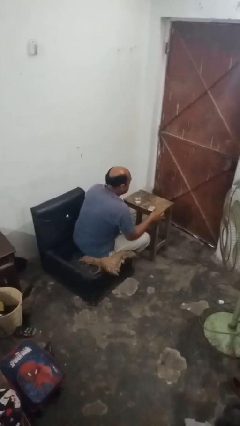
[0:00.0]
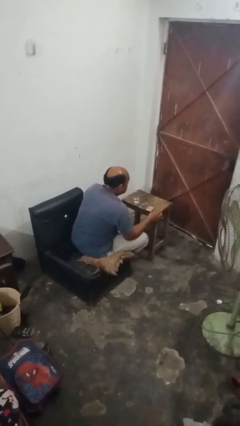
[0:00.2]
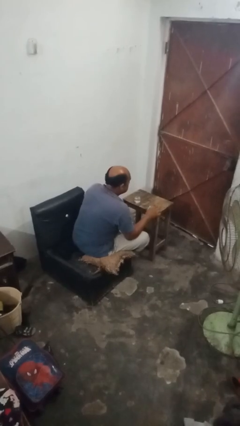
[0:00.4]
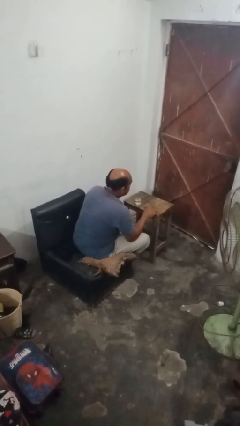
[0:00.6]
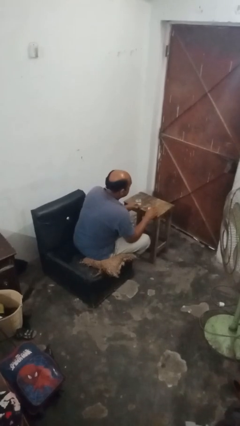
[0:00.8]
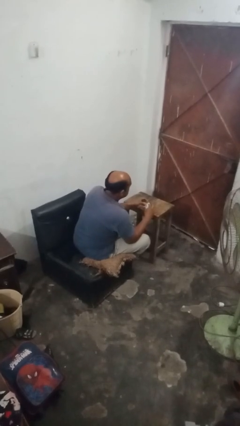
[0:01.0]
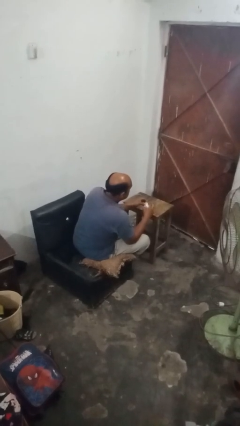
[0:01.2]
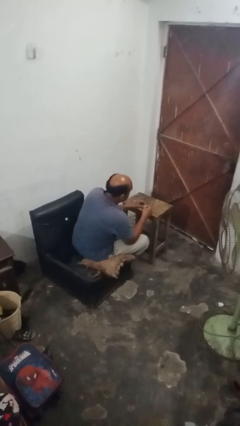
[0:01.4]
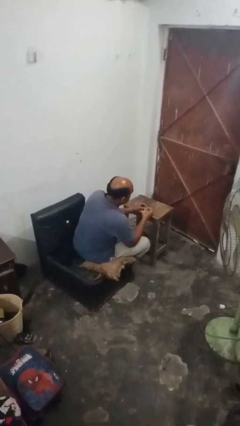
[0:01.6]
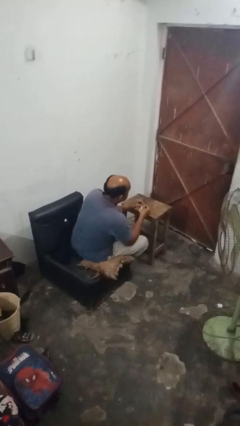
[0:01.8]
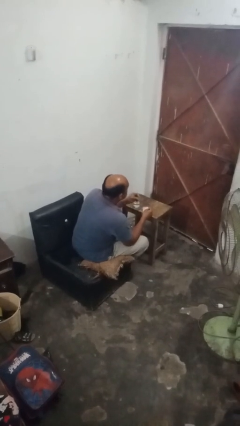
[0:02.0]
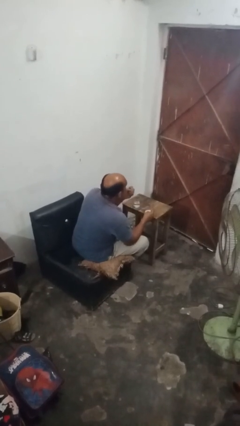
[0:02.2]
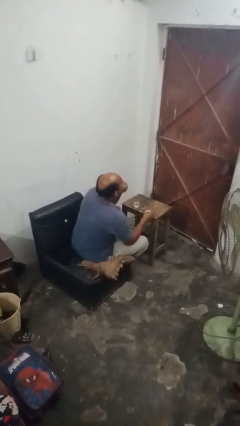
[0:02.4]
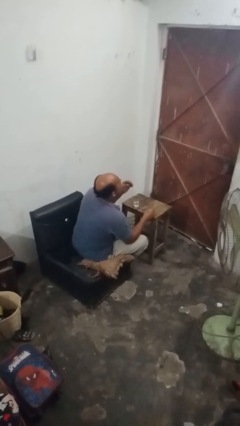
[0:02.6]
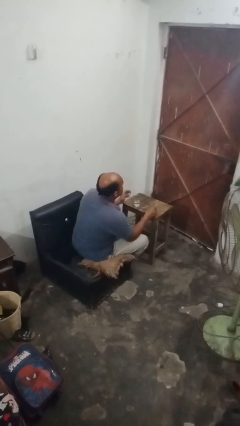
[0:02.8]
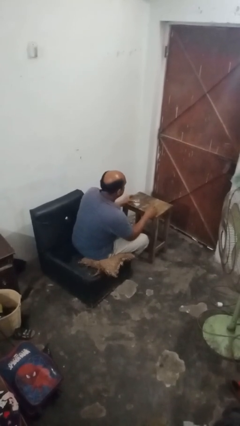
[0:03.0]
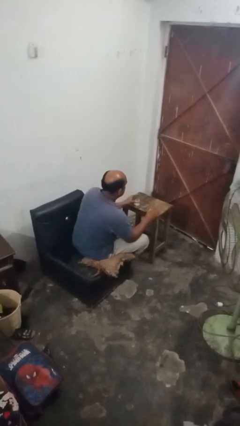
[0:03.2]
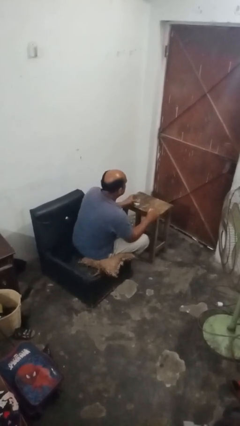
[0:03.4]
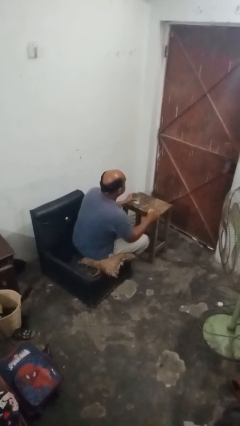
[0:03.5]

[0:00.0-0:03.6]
person takes medicine pills

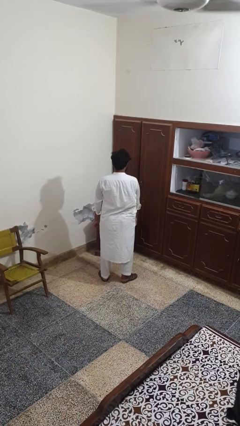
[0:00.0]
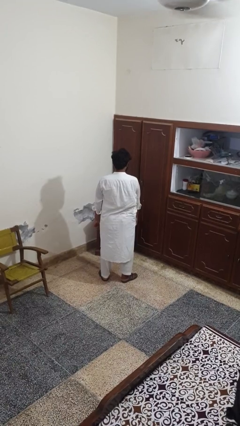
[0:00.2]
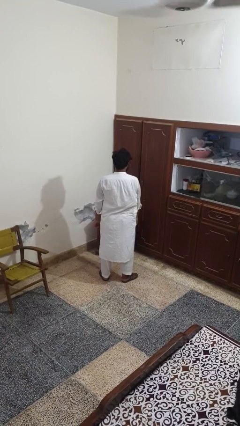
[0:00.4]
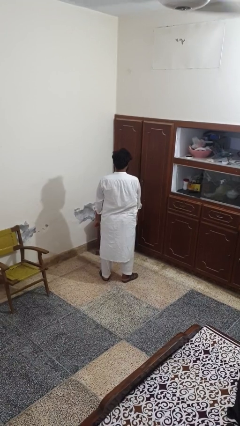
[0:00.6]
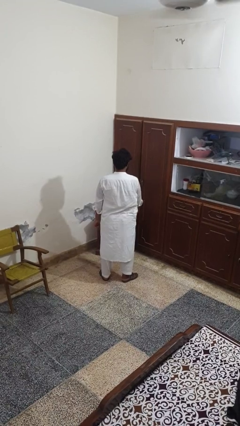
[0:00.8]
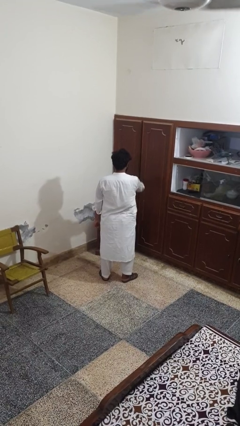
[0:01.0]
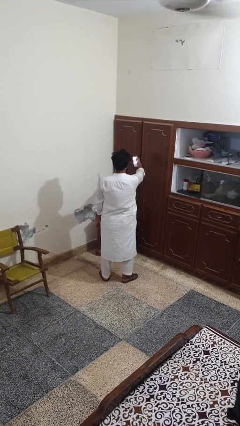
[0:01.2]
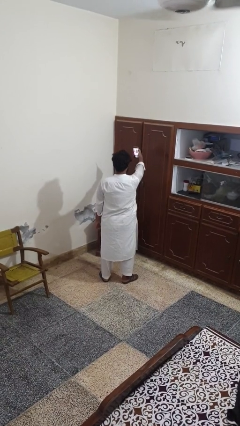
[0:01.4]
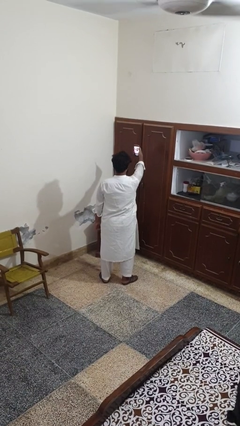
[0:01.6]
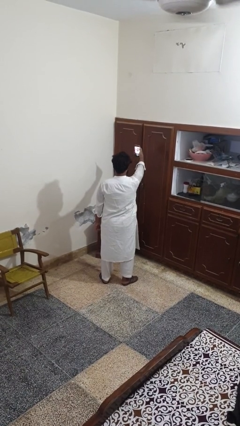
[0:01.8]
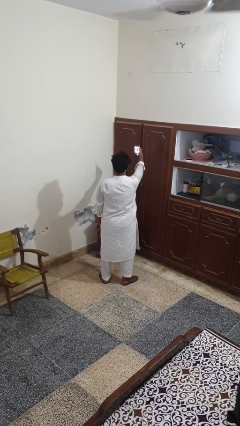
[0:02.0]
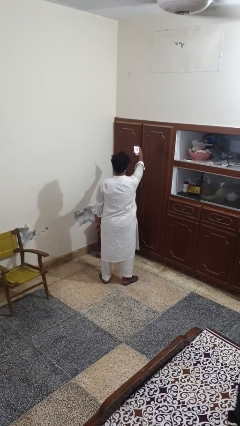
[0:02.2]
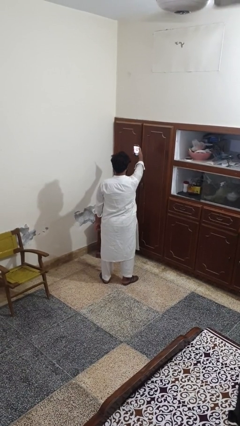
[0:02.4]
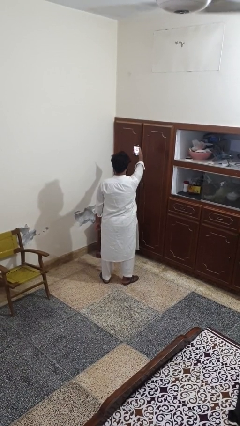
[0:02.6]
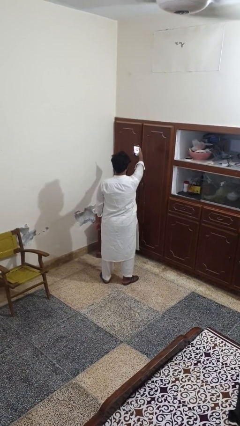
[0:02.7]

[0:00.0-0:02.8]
person takes selfie

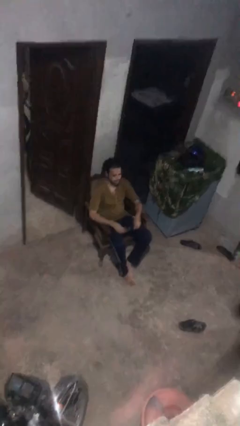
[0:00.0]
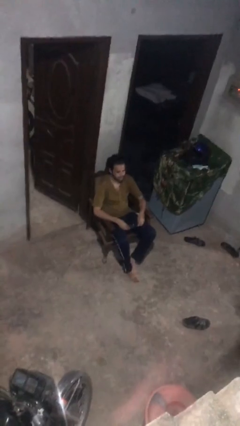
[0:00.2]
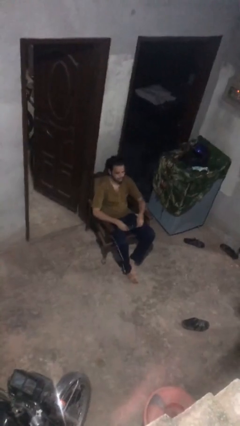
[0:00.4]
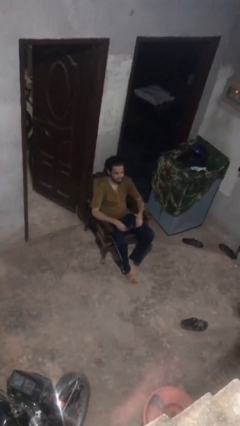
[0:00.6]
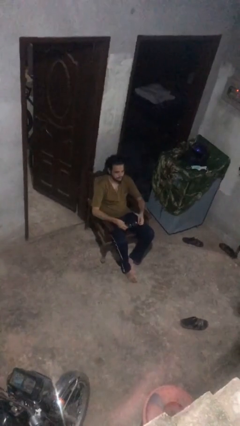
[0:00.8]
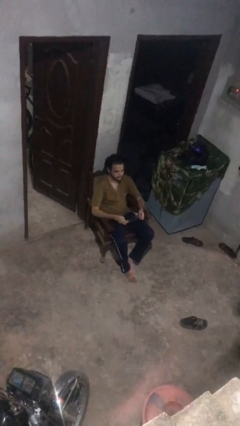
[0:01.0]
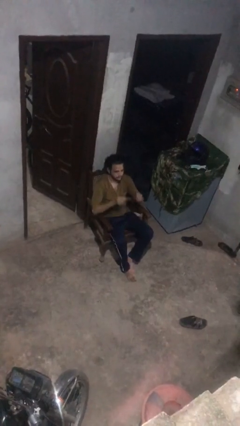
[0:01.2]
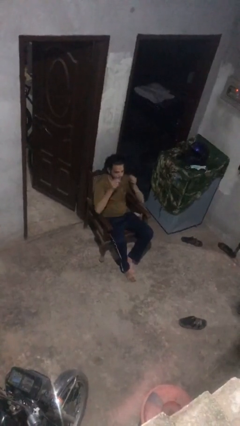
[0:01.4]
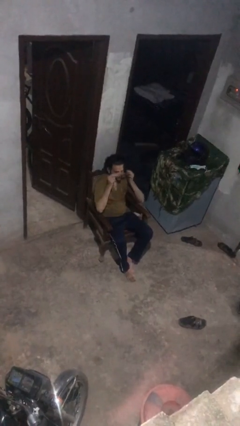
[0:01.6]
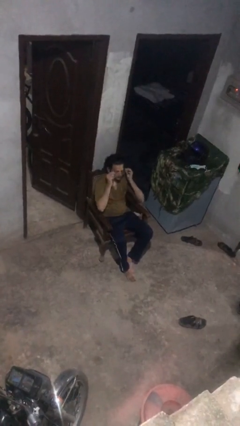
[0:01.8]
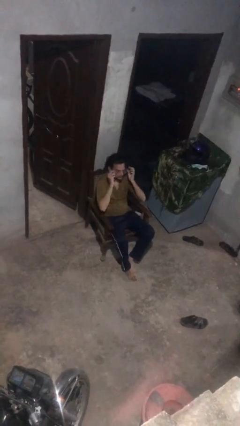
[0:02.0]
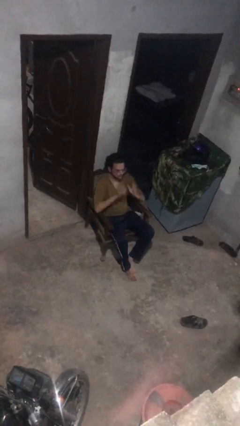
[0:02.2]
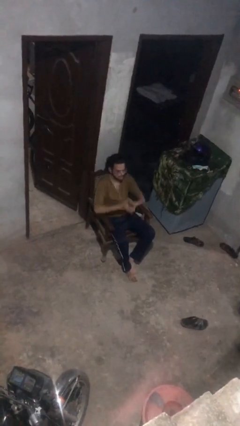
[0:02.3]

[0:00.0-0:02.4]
person puts on glasses

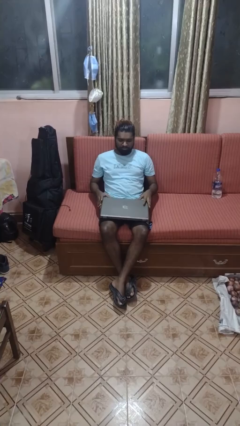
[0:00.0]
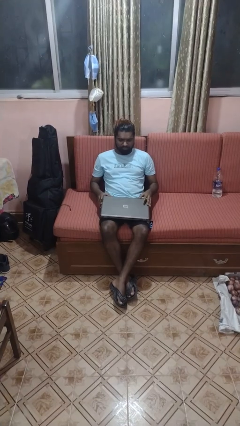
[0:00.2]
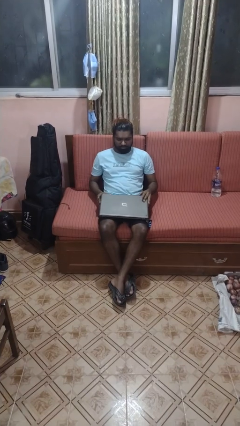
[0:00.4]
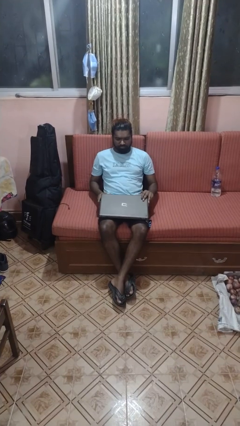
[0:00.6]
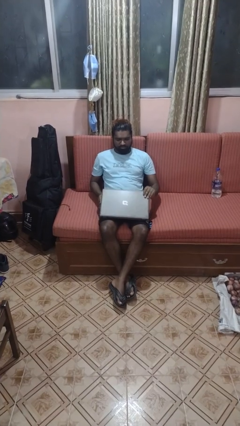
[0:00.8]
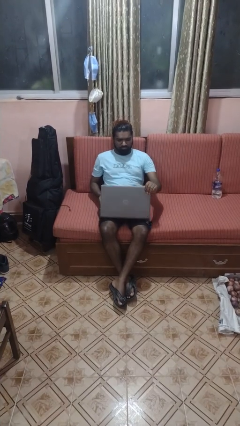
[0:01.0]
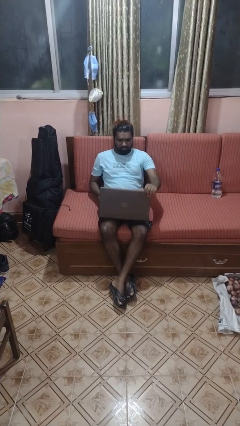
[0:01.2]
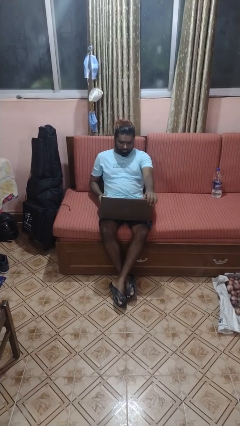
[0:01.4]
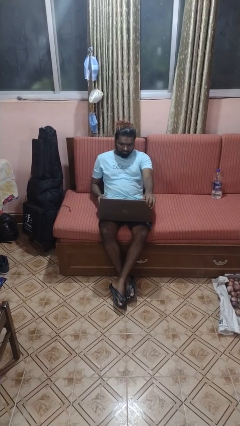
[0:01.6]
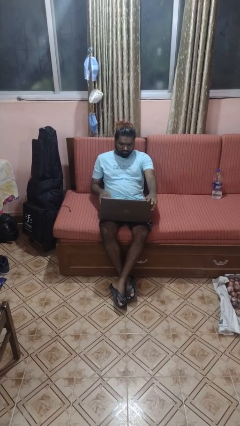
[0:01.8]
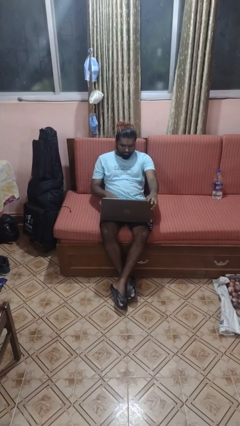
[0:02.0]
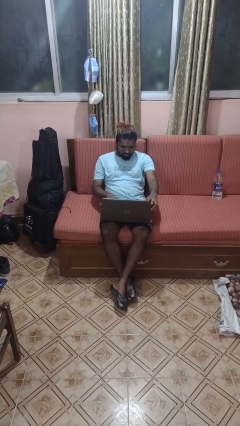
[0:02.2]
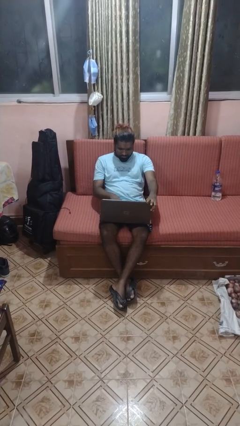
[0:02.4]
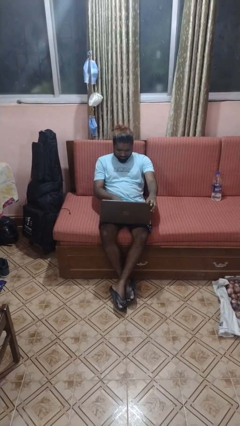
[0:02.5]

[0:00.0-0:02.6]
person opens laptop

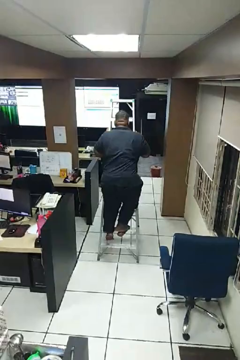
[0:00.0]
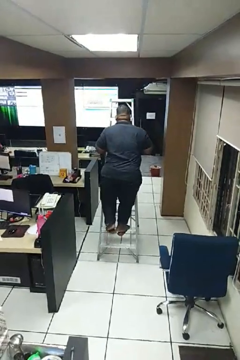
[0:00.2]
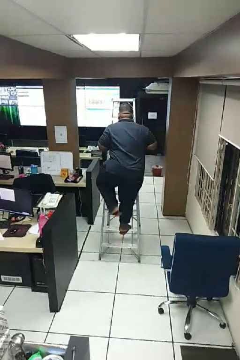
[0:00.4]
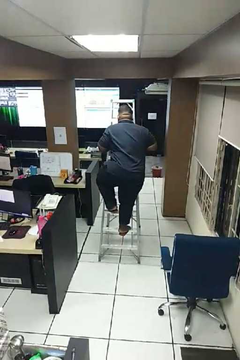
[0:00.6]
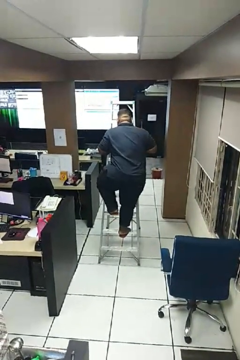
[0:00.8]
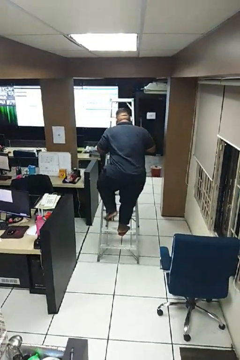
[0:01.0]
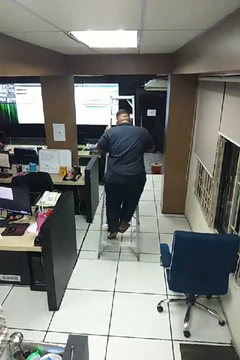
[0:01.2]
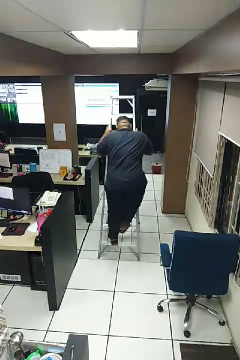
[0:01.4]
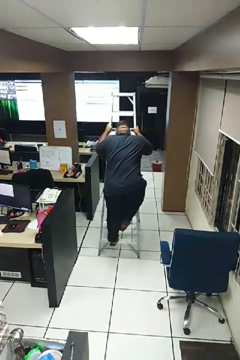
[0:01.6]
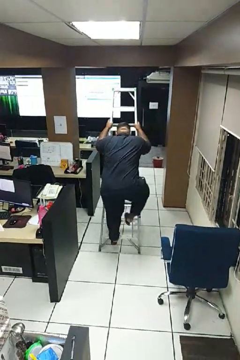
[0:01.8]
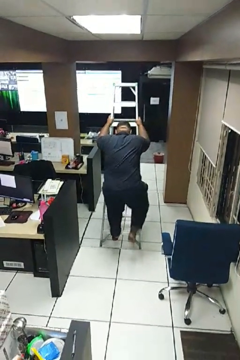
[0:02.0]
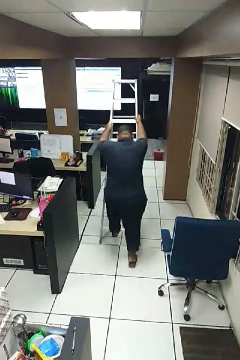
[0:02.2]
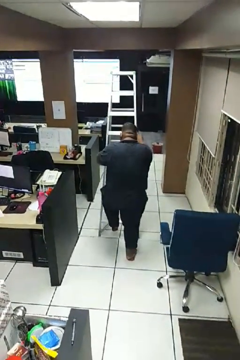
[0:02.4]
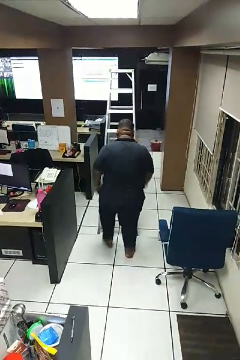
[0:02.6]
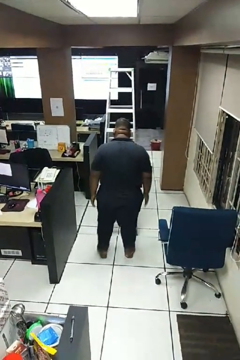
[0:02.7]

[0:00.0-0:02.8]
person climbs down ladder

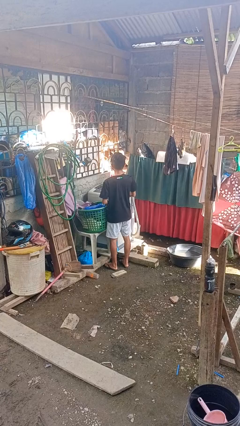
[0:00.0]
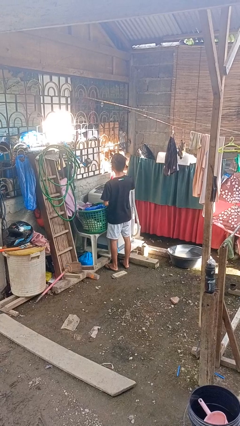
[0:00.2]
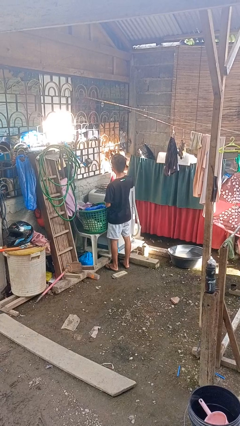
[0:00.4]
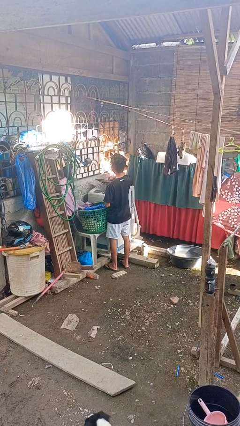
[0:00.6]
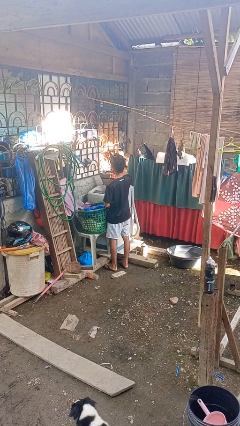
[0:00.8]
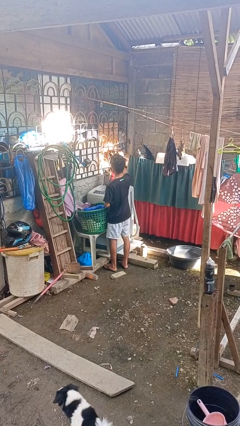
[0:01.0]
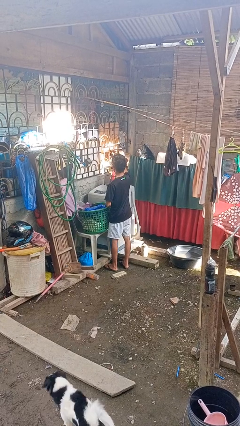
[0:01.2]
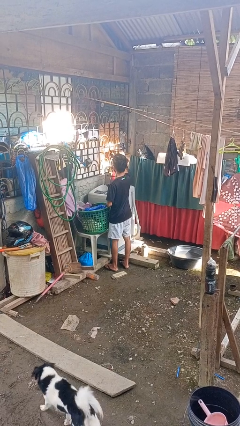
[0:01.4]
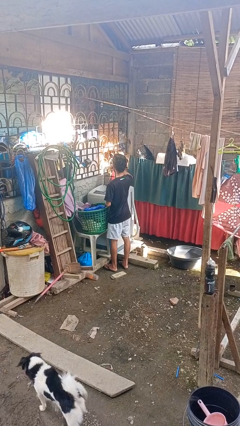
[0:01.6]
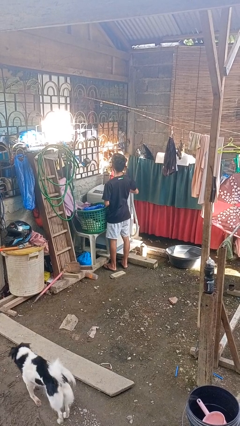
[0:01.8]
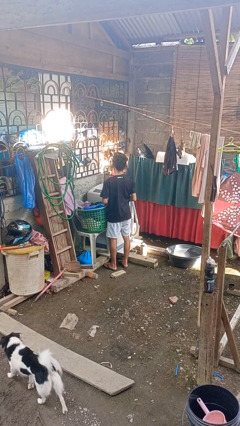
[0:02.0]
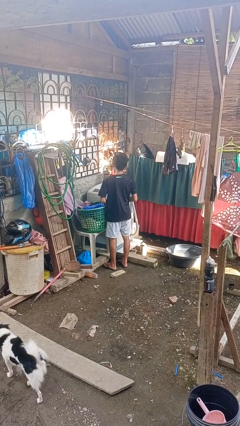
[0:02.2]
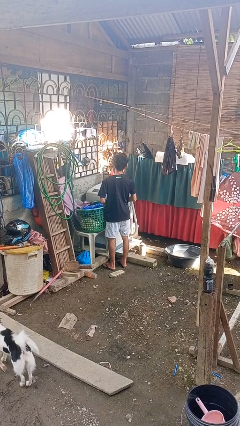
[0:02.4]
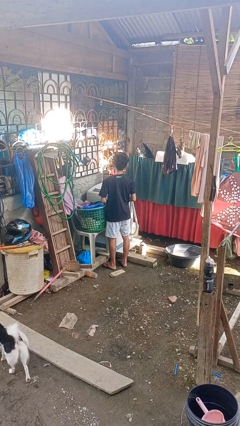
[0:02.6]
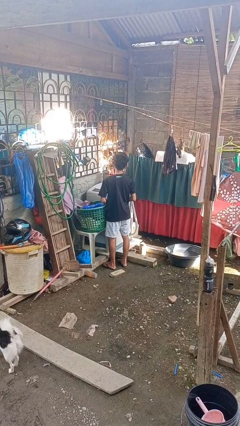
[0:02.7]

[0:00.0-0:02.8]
person opens clothes washer

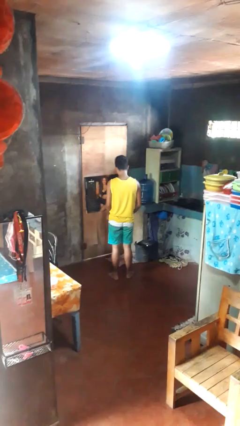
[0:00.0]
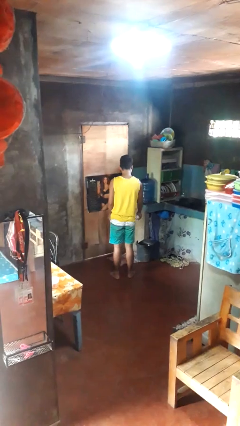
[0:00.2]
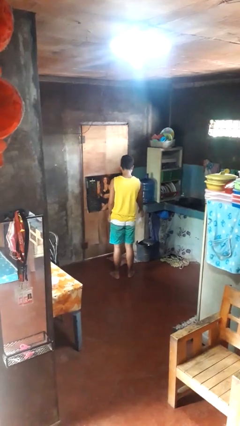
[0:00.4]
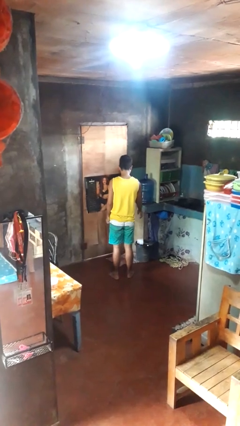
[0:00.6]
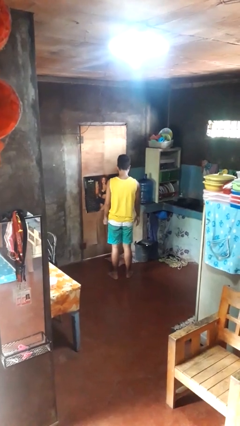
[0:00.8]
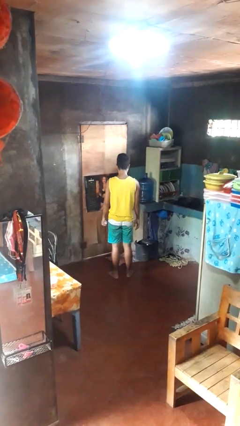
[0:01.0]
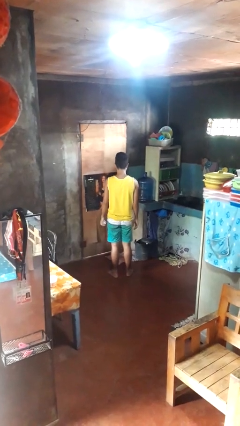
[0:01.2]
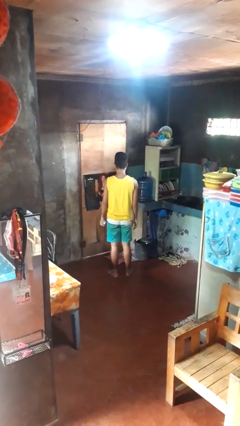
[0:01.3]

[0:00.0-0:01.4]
person discards trash
